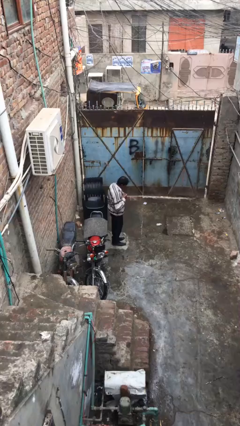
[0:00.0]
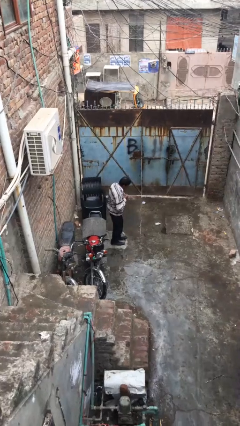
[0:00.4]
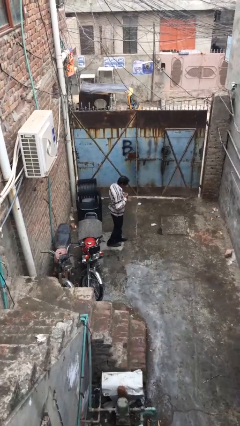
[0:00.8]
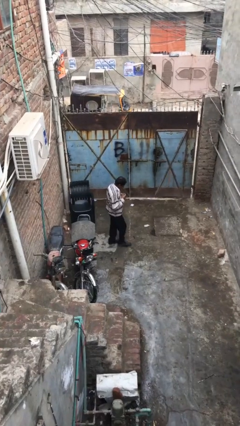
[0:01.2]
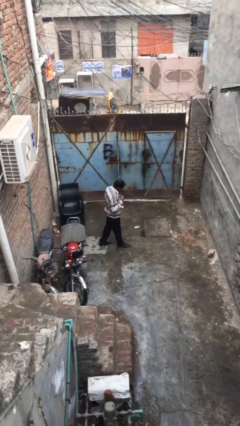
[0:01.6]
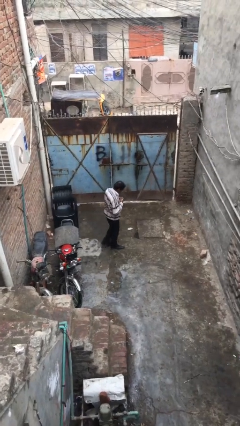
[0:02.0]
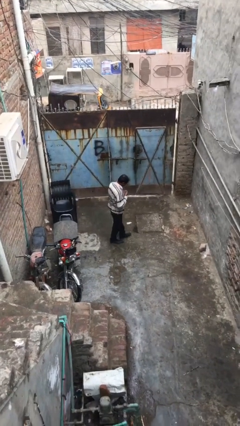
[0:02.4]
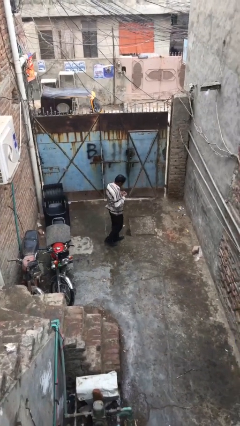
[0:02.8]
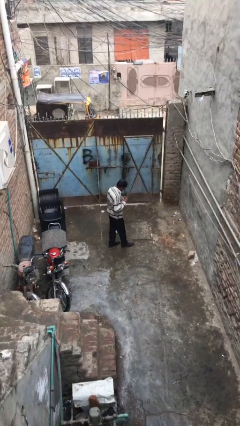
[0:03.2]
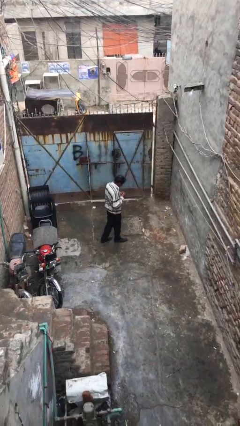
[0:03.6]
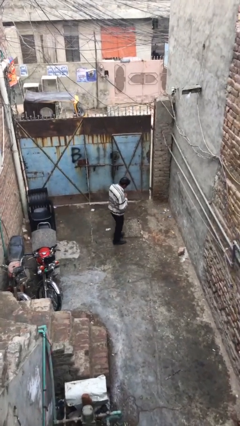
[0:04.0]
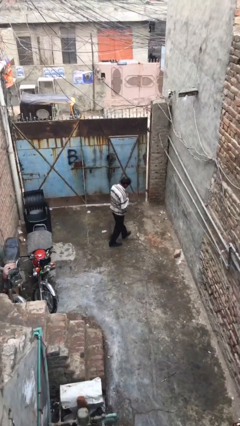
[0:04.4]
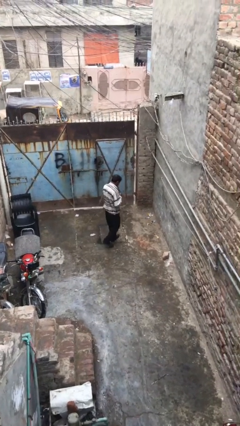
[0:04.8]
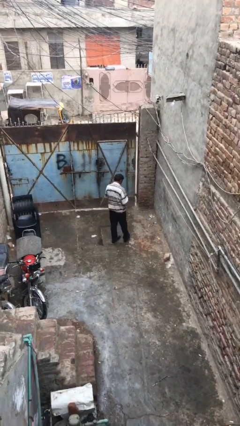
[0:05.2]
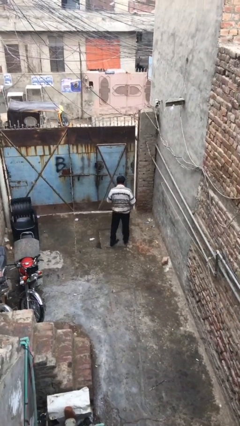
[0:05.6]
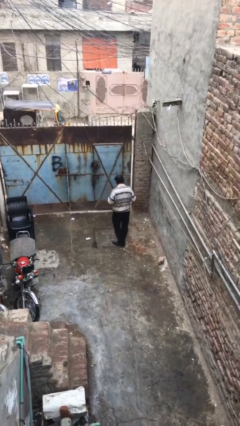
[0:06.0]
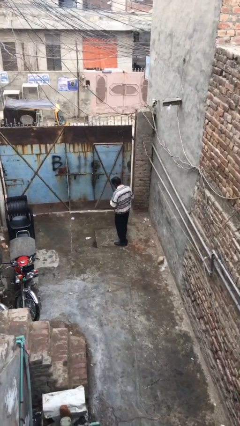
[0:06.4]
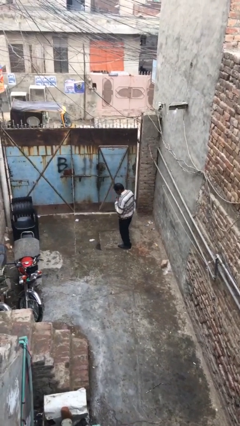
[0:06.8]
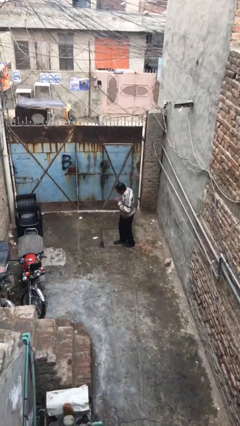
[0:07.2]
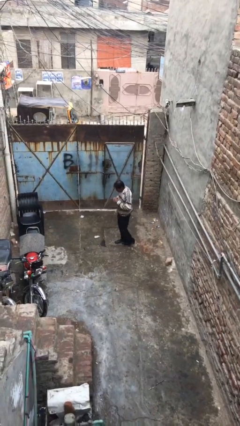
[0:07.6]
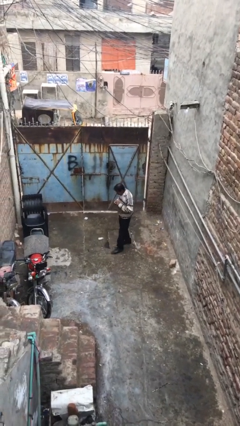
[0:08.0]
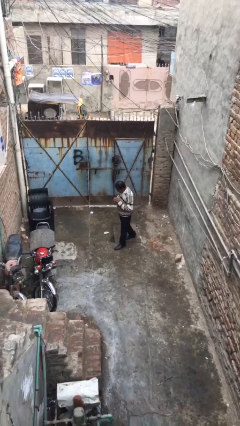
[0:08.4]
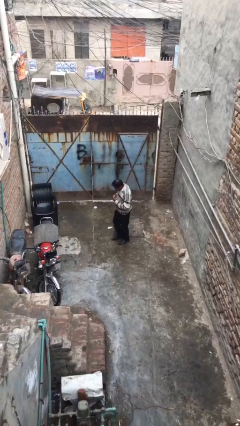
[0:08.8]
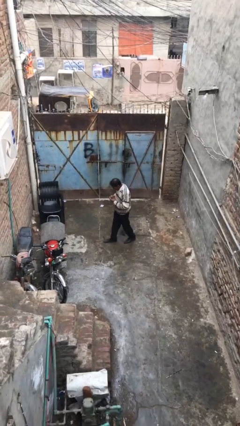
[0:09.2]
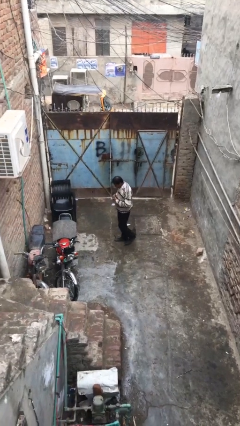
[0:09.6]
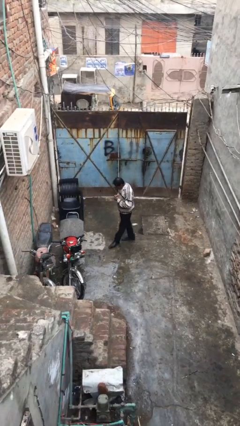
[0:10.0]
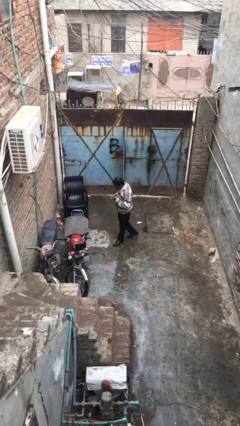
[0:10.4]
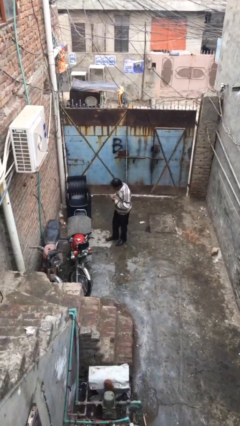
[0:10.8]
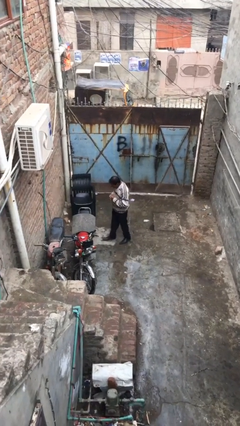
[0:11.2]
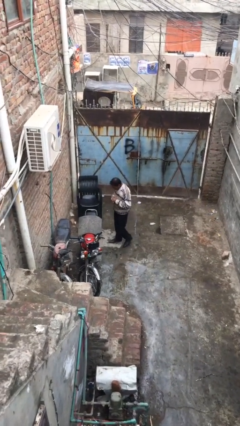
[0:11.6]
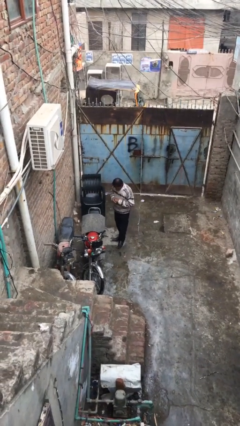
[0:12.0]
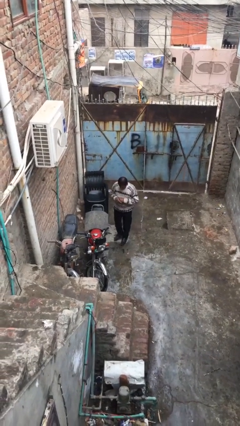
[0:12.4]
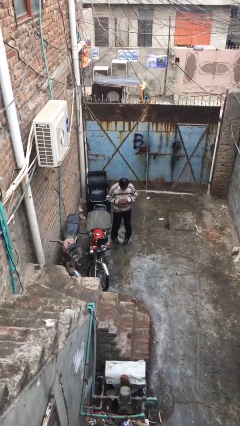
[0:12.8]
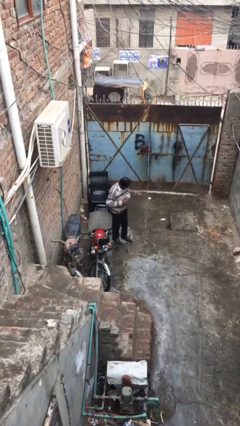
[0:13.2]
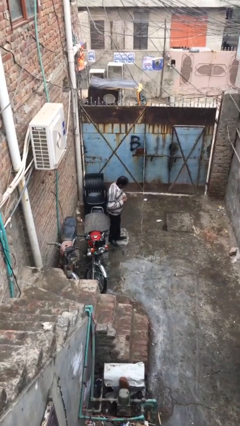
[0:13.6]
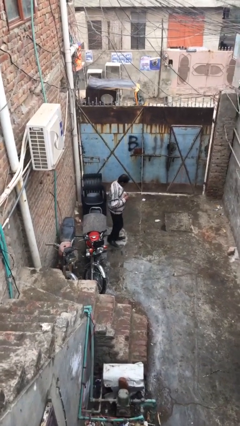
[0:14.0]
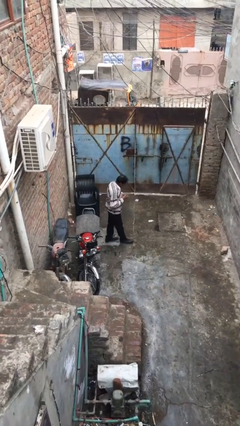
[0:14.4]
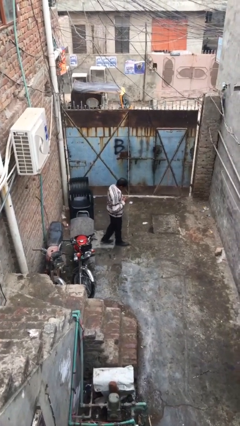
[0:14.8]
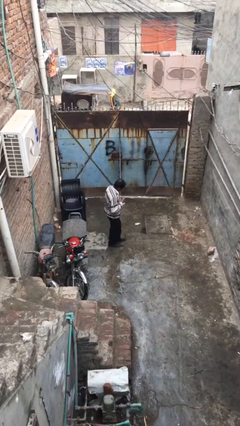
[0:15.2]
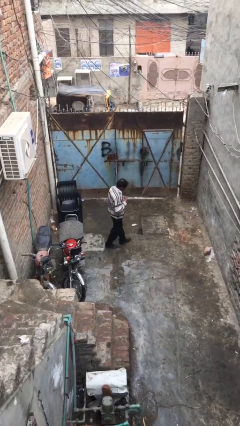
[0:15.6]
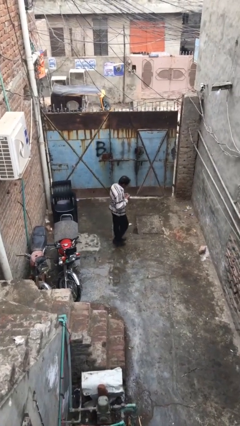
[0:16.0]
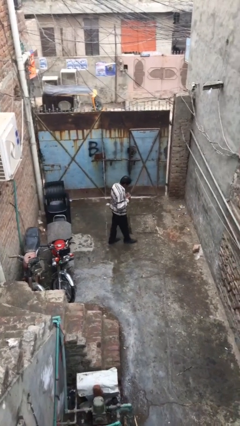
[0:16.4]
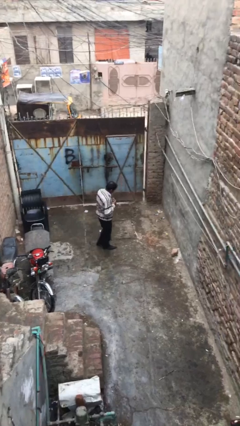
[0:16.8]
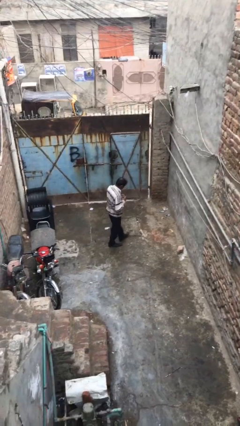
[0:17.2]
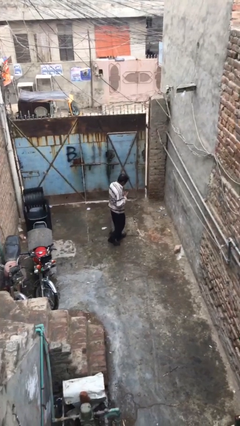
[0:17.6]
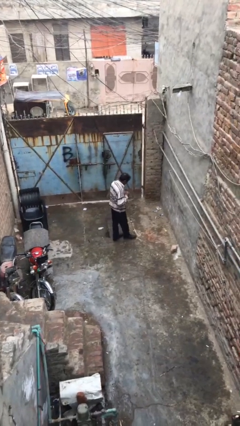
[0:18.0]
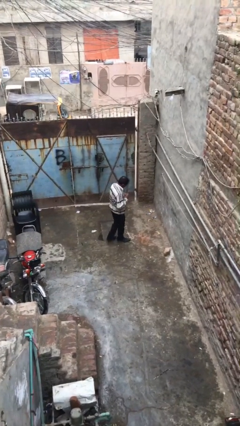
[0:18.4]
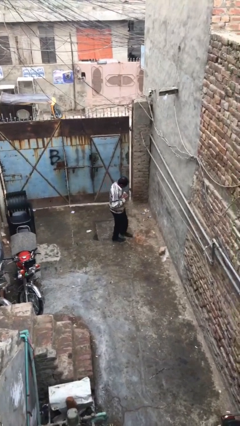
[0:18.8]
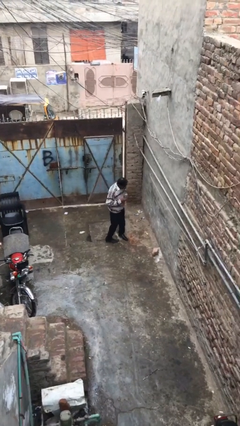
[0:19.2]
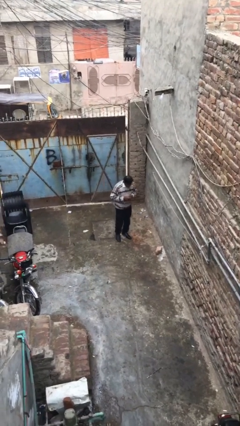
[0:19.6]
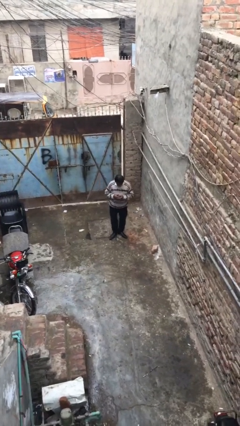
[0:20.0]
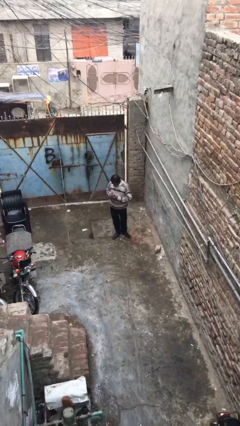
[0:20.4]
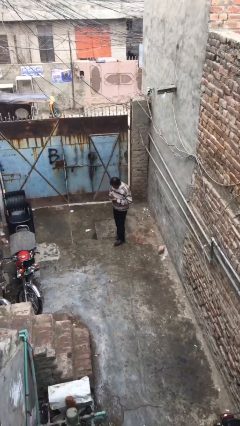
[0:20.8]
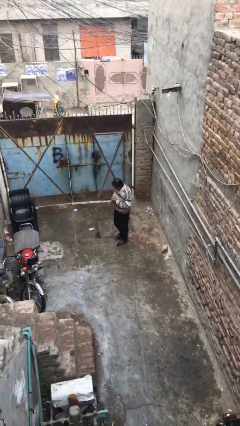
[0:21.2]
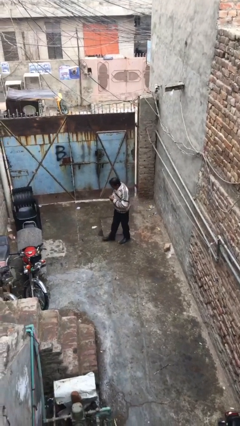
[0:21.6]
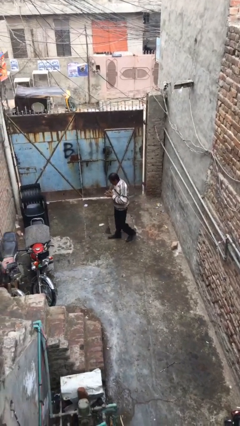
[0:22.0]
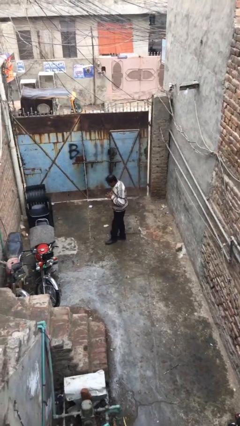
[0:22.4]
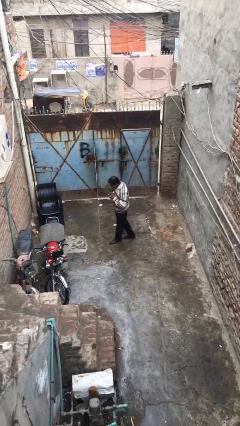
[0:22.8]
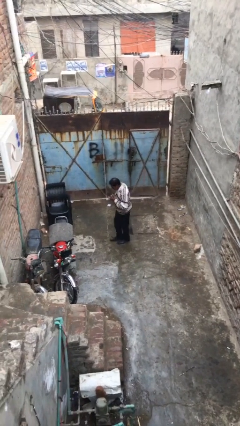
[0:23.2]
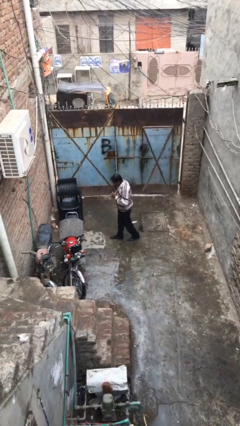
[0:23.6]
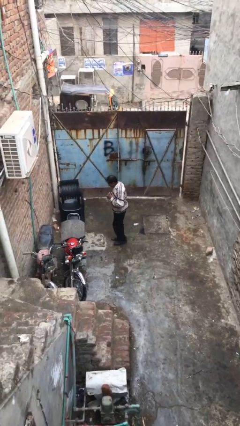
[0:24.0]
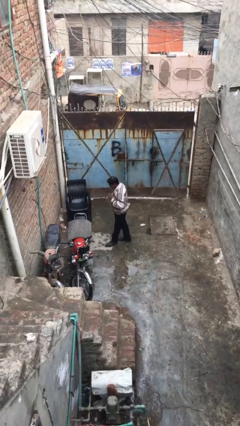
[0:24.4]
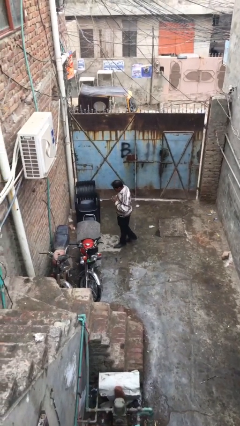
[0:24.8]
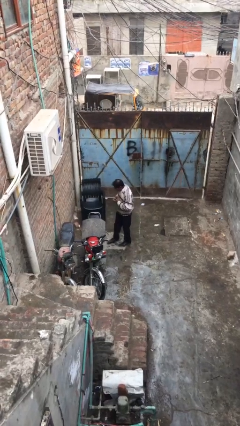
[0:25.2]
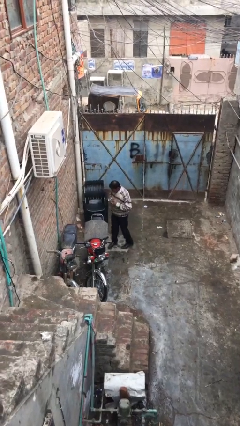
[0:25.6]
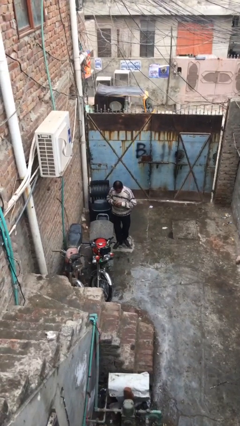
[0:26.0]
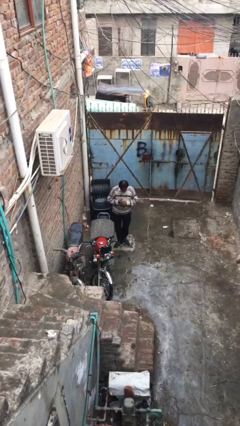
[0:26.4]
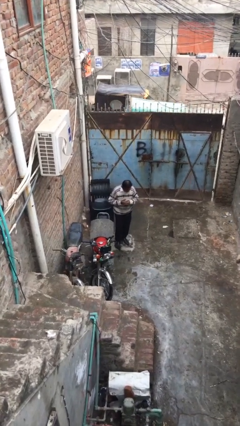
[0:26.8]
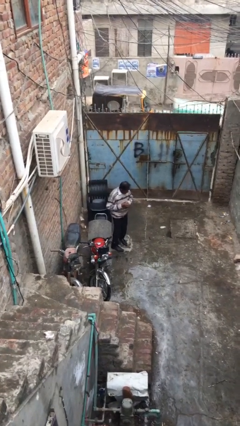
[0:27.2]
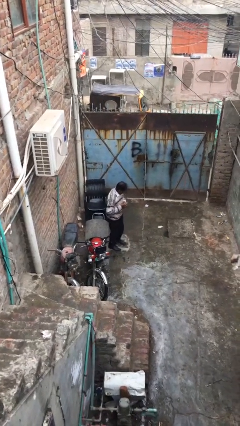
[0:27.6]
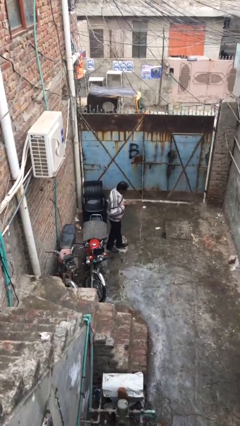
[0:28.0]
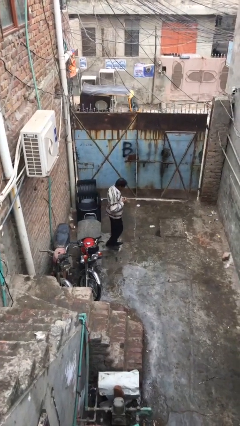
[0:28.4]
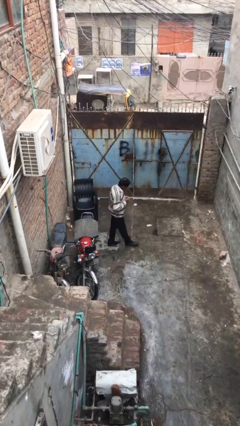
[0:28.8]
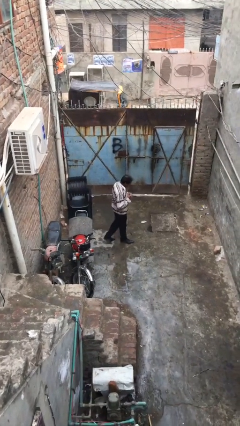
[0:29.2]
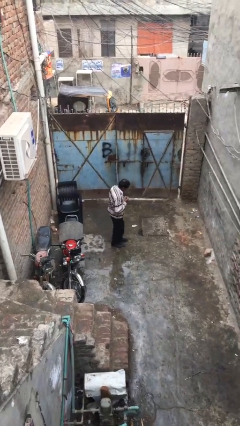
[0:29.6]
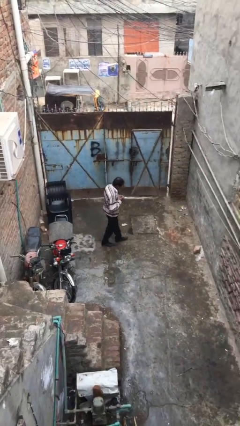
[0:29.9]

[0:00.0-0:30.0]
person walks

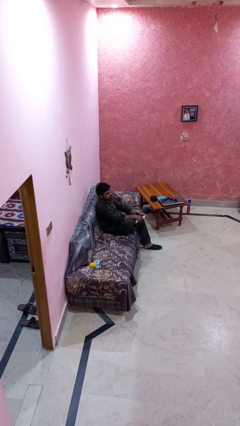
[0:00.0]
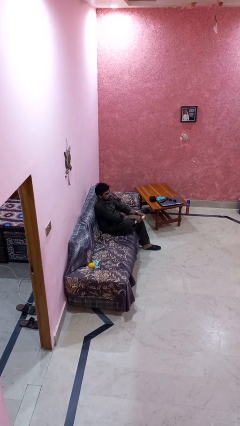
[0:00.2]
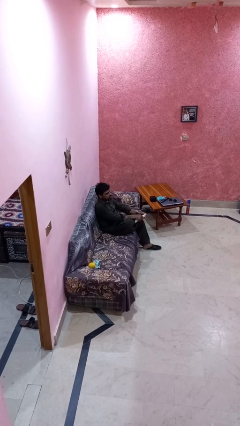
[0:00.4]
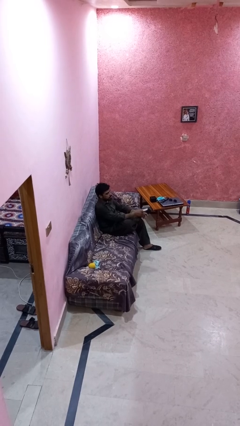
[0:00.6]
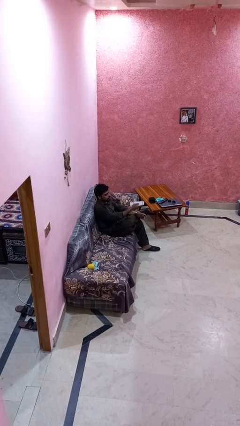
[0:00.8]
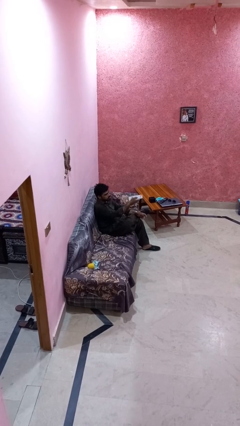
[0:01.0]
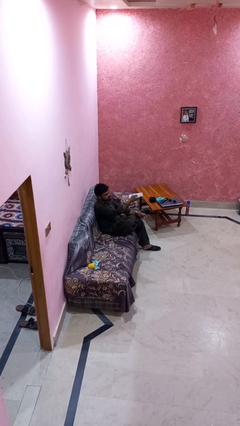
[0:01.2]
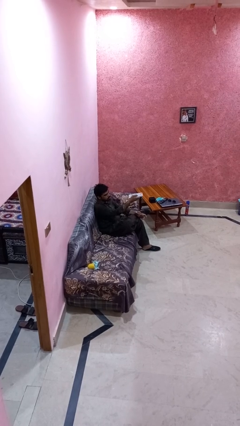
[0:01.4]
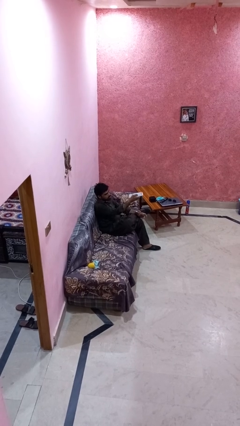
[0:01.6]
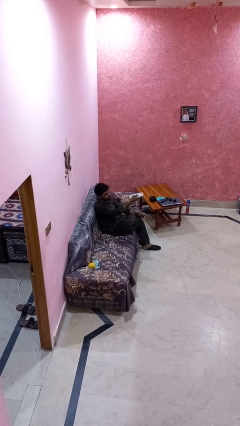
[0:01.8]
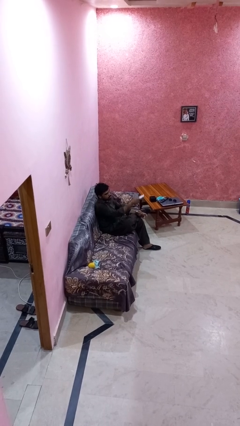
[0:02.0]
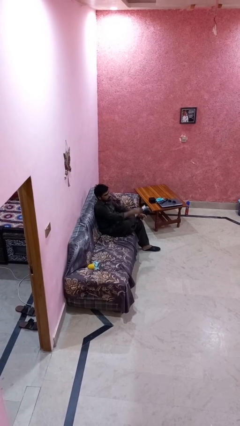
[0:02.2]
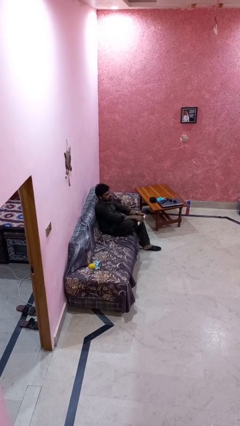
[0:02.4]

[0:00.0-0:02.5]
person uses television remote

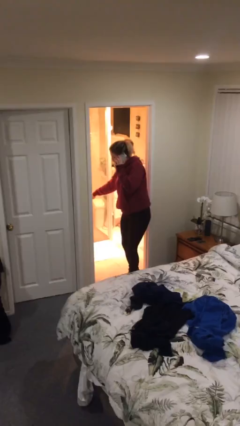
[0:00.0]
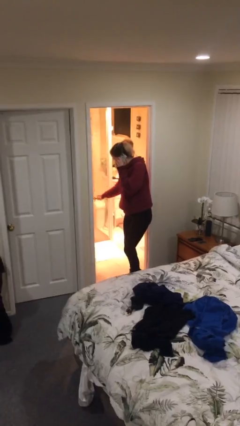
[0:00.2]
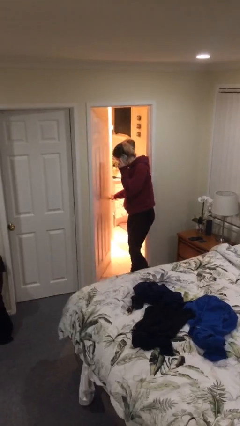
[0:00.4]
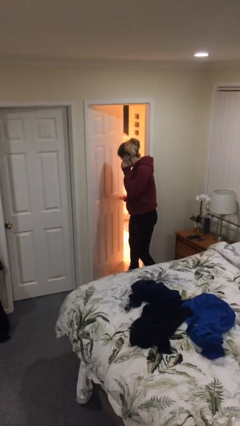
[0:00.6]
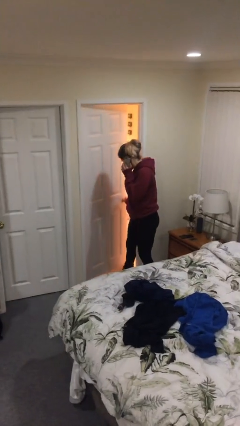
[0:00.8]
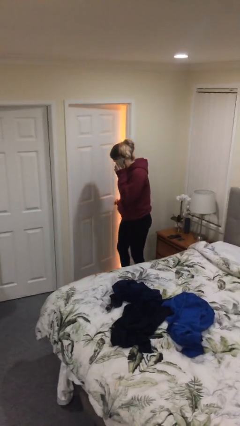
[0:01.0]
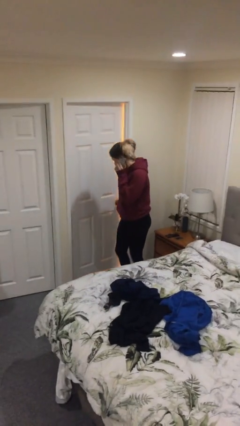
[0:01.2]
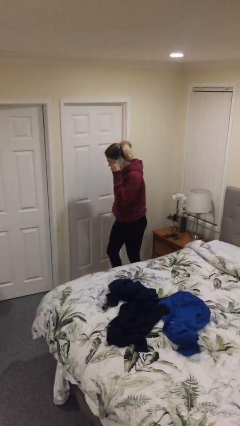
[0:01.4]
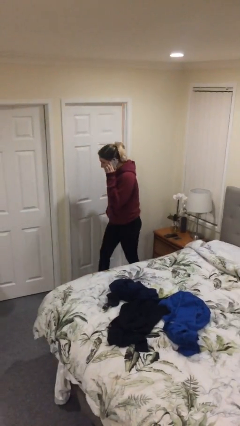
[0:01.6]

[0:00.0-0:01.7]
person closes facility door
